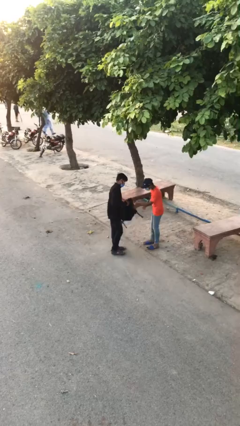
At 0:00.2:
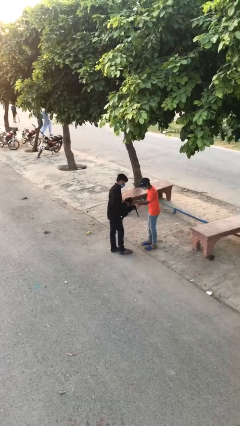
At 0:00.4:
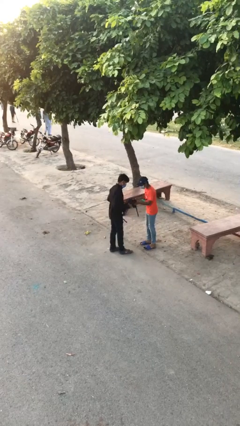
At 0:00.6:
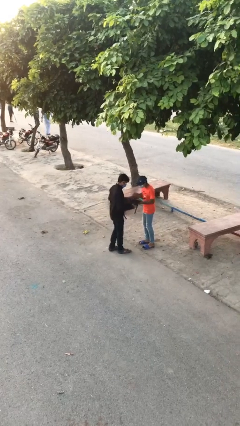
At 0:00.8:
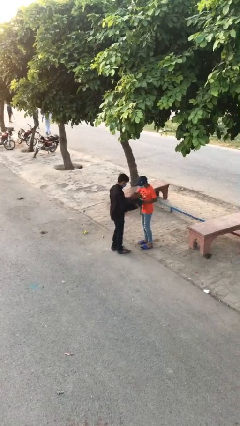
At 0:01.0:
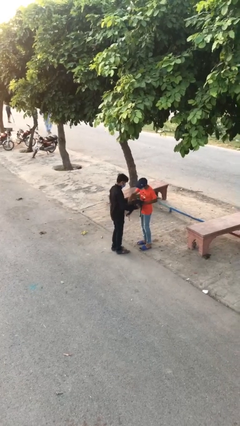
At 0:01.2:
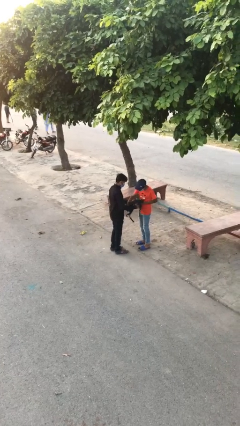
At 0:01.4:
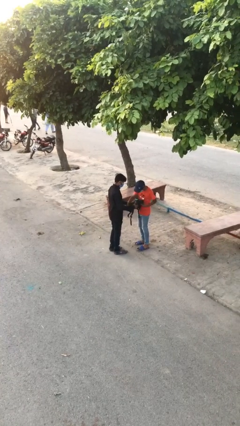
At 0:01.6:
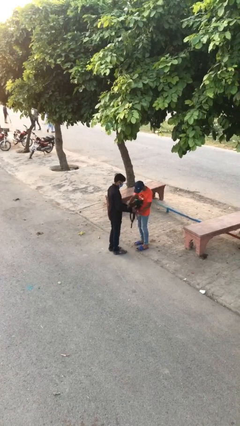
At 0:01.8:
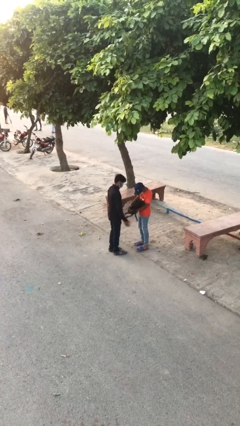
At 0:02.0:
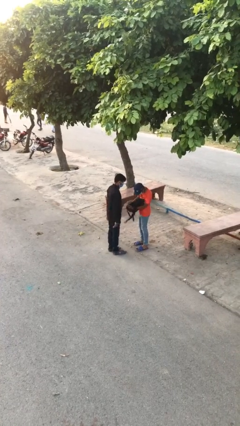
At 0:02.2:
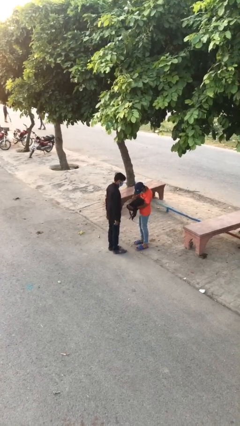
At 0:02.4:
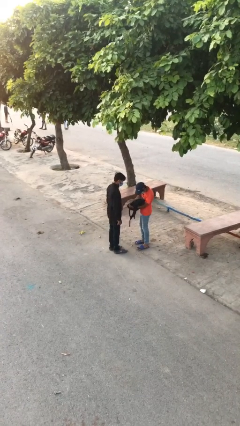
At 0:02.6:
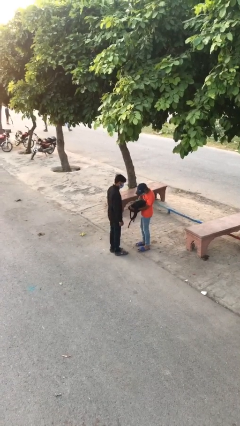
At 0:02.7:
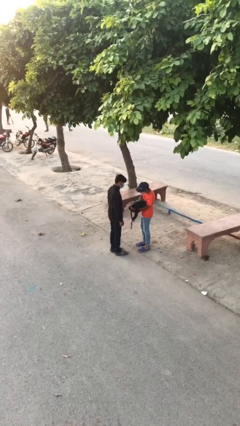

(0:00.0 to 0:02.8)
person transfers object to person

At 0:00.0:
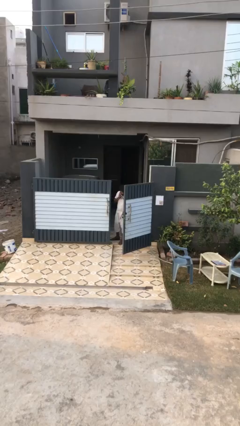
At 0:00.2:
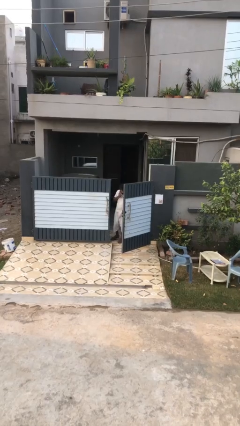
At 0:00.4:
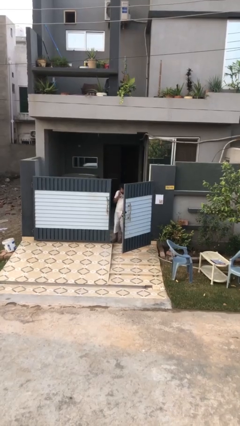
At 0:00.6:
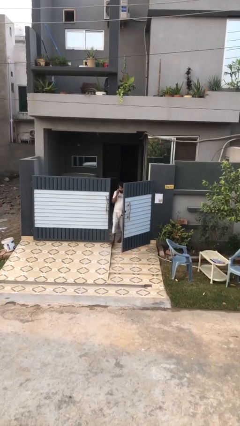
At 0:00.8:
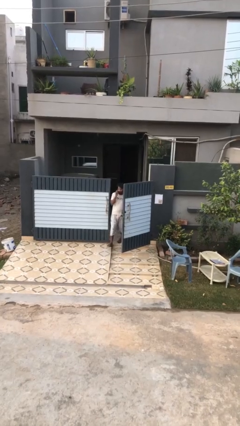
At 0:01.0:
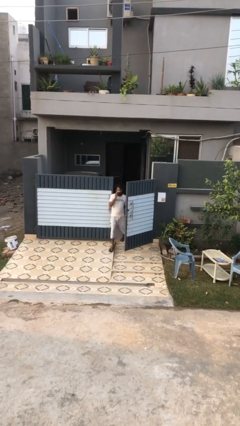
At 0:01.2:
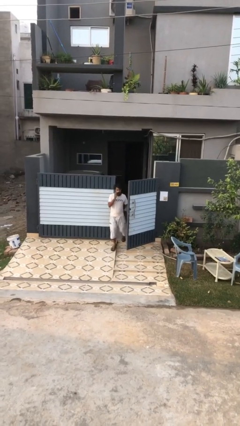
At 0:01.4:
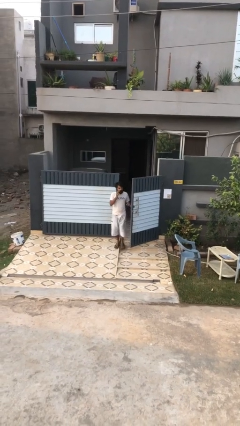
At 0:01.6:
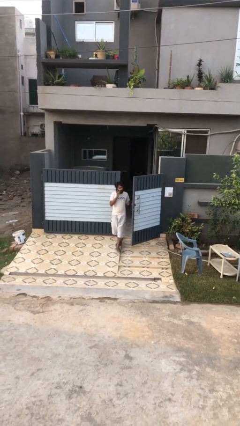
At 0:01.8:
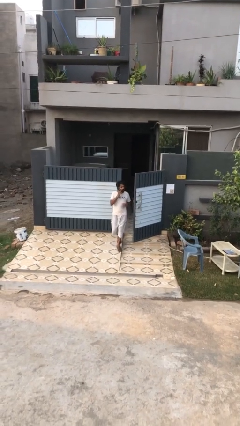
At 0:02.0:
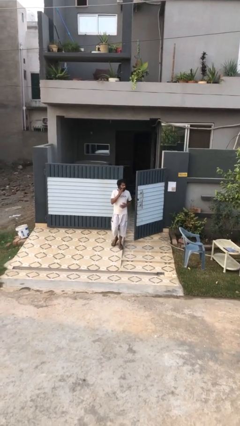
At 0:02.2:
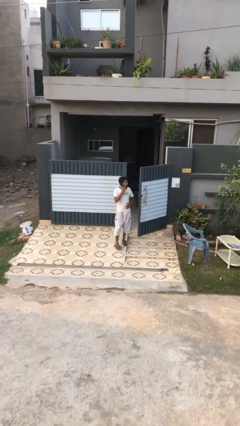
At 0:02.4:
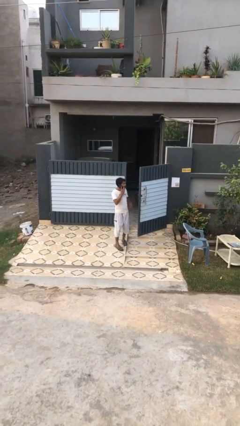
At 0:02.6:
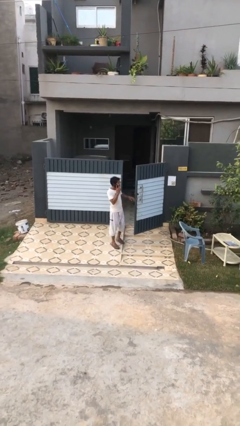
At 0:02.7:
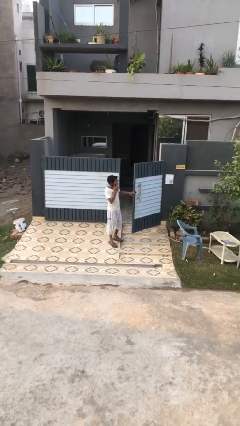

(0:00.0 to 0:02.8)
person enters scene through structure

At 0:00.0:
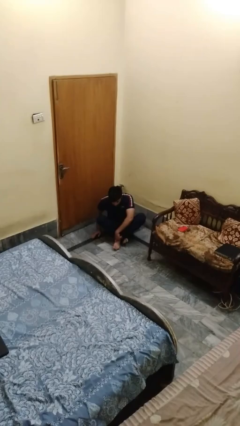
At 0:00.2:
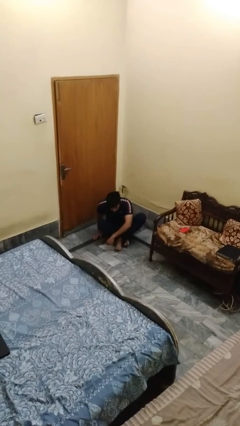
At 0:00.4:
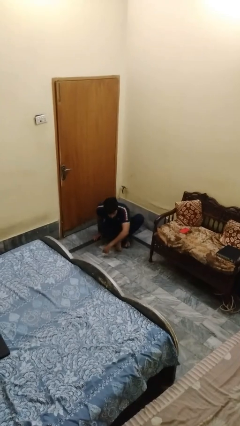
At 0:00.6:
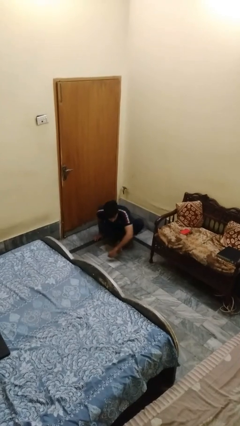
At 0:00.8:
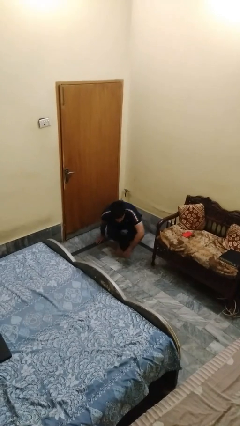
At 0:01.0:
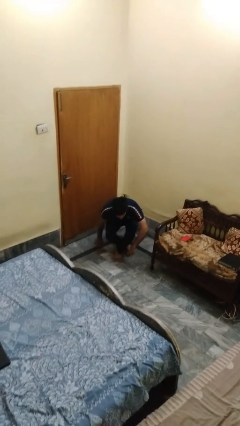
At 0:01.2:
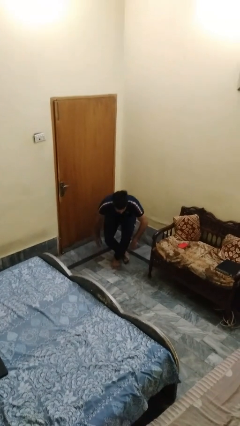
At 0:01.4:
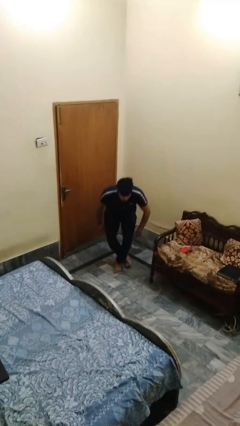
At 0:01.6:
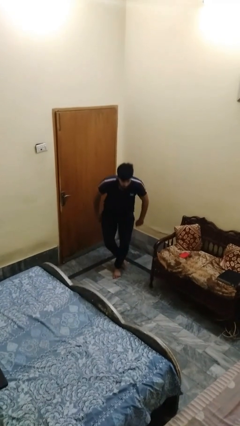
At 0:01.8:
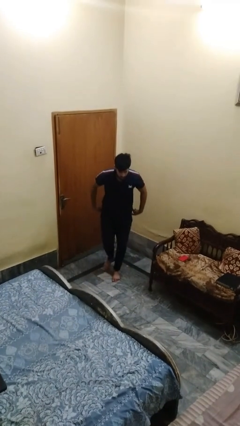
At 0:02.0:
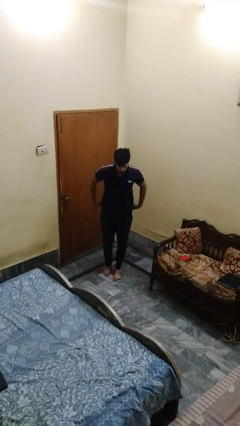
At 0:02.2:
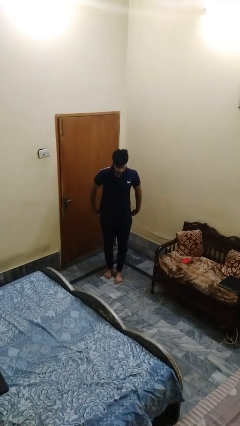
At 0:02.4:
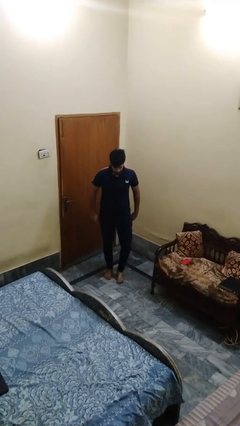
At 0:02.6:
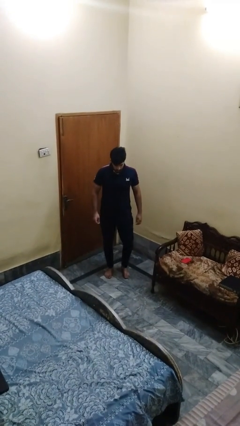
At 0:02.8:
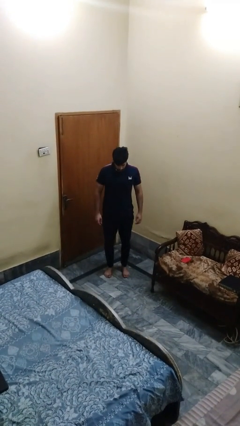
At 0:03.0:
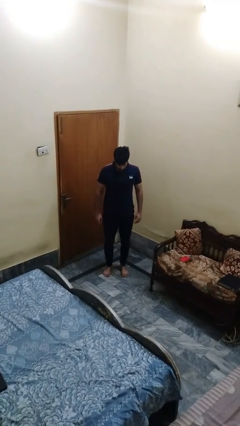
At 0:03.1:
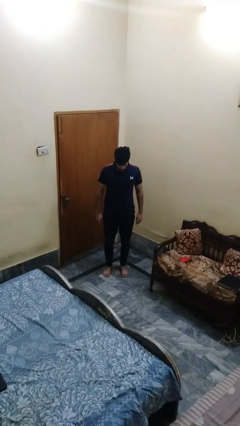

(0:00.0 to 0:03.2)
person stands up from floor

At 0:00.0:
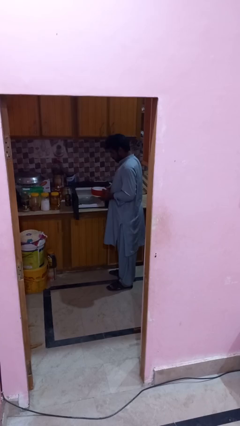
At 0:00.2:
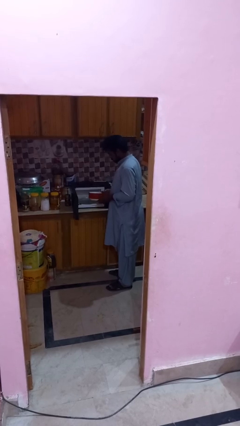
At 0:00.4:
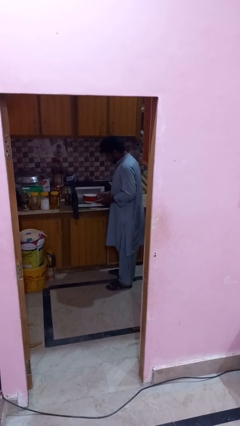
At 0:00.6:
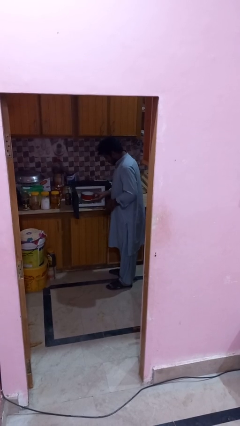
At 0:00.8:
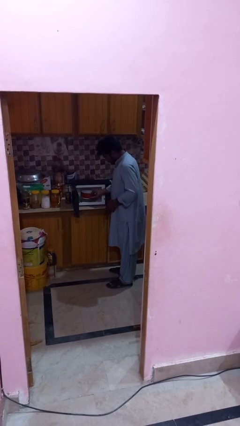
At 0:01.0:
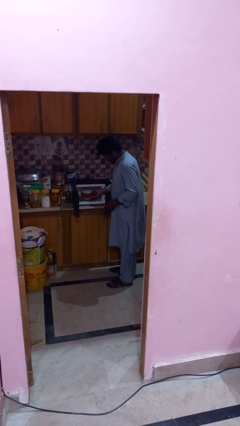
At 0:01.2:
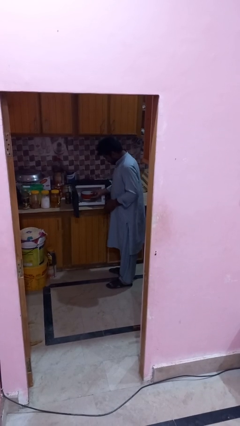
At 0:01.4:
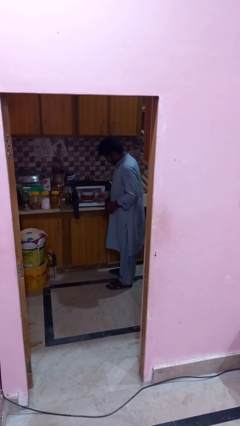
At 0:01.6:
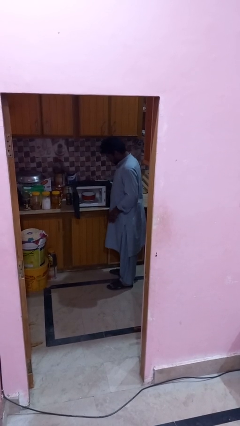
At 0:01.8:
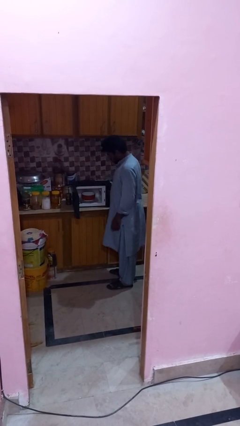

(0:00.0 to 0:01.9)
person puts object into microwave

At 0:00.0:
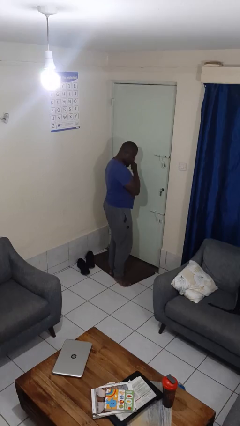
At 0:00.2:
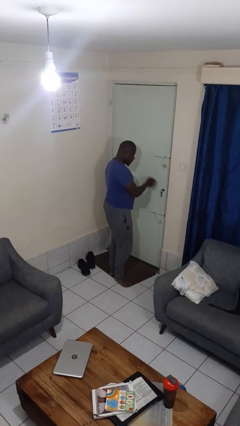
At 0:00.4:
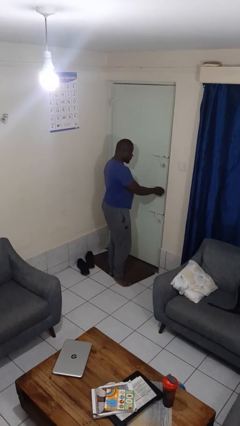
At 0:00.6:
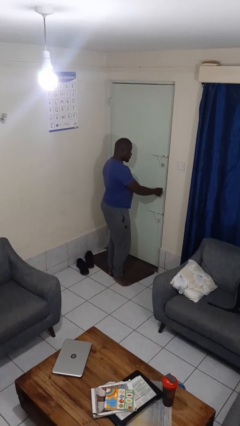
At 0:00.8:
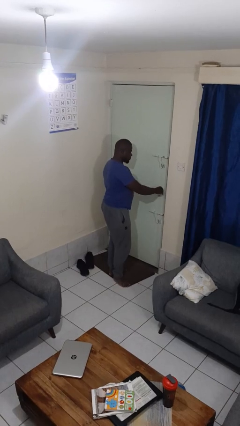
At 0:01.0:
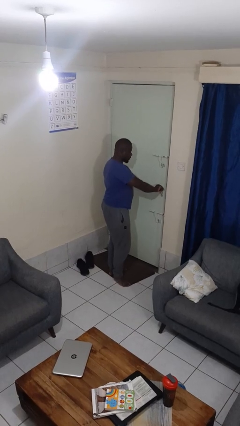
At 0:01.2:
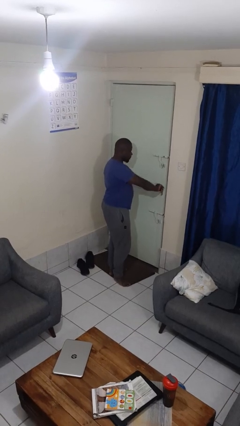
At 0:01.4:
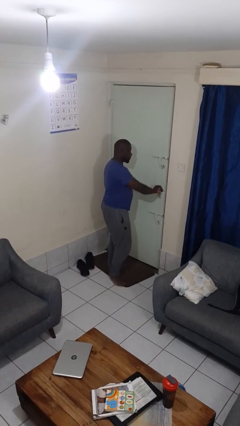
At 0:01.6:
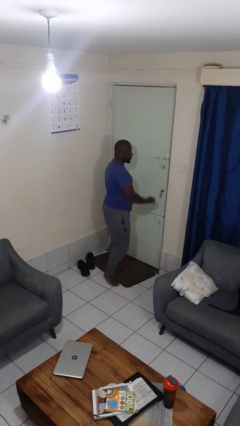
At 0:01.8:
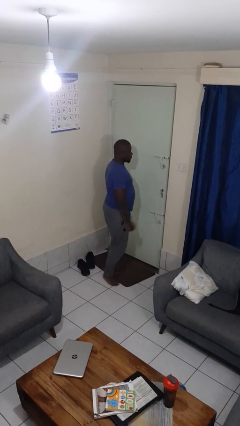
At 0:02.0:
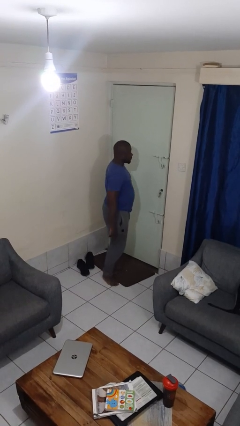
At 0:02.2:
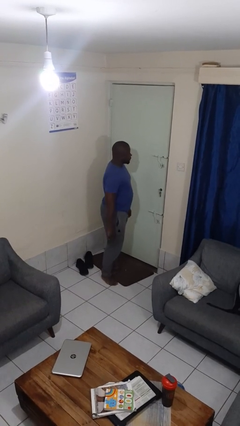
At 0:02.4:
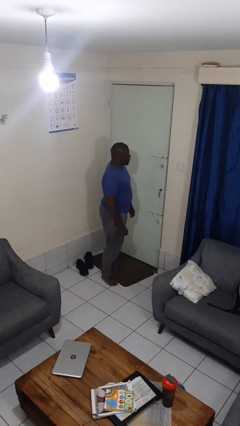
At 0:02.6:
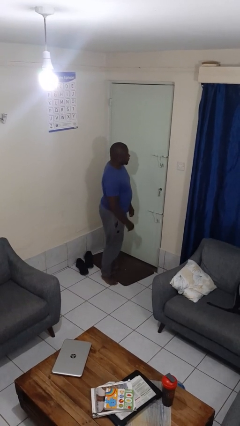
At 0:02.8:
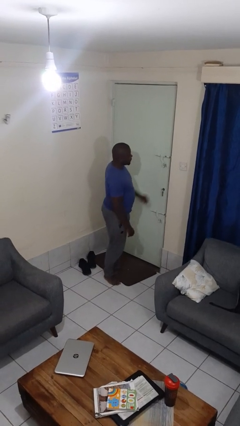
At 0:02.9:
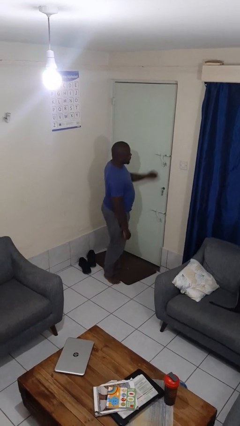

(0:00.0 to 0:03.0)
person unlocks door with keys

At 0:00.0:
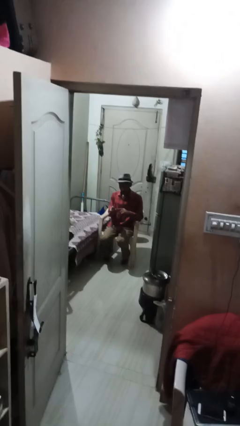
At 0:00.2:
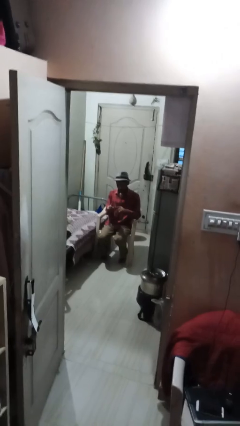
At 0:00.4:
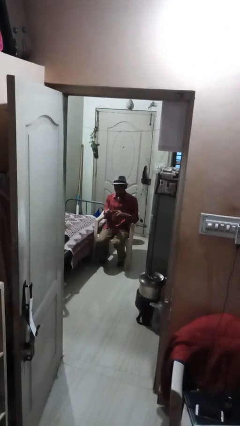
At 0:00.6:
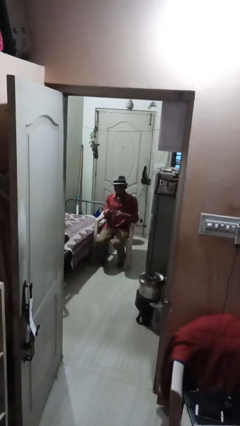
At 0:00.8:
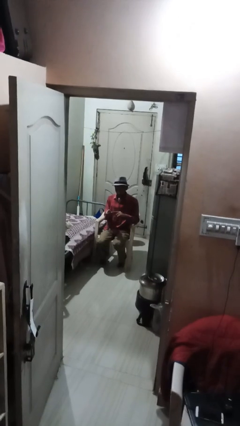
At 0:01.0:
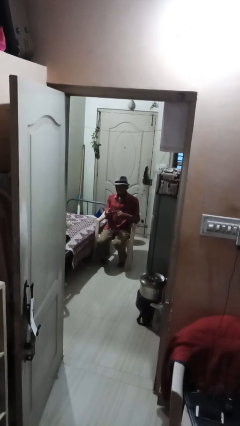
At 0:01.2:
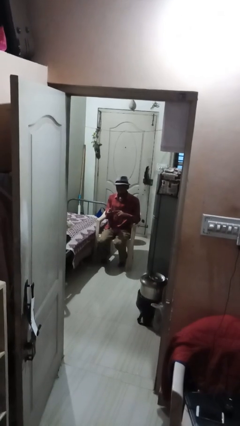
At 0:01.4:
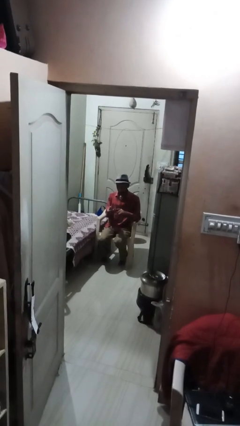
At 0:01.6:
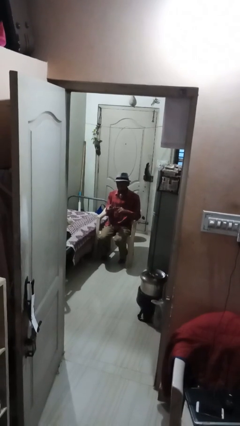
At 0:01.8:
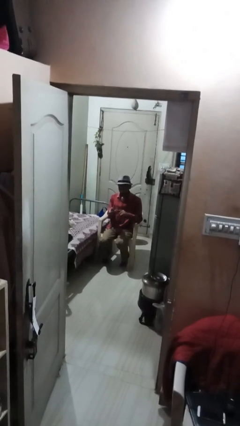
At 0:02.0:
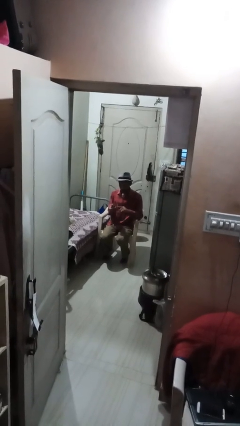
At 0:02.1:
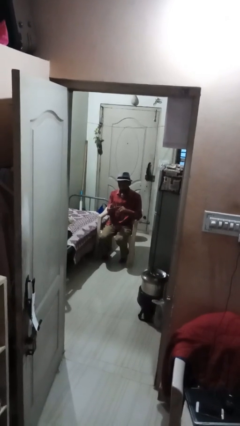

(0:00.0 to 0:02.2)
person clips fingernails

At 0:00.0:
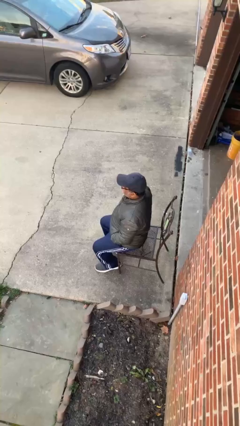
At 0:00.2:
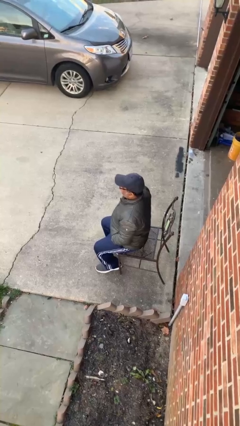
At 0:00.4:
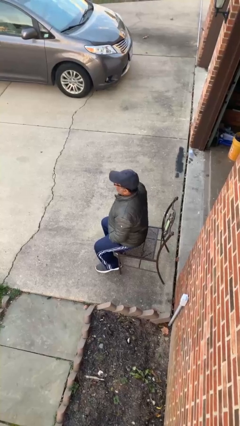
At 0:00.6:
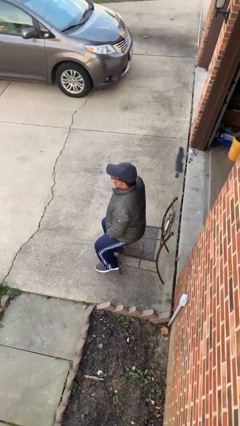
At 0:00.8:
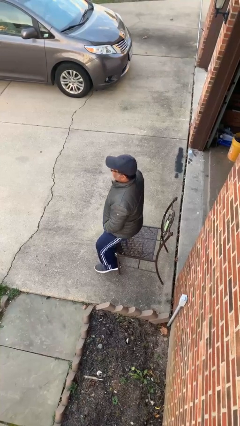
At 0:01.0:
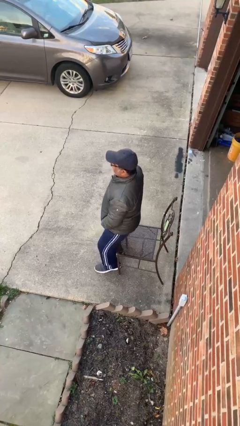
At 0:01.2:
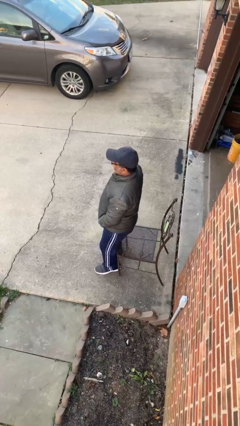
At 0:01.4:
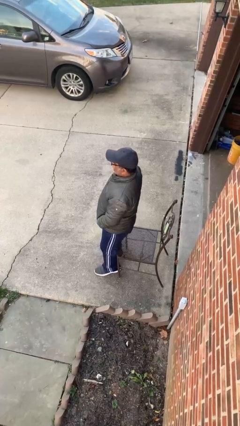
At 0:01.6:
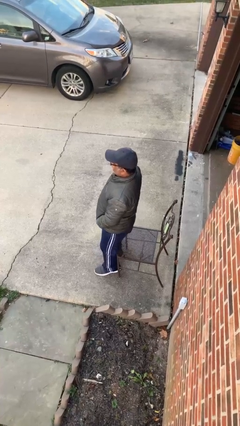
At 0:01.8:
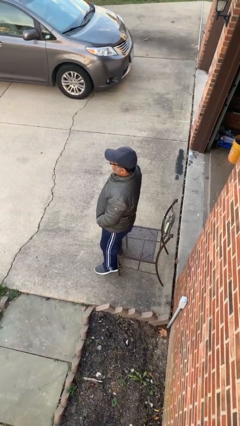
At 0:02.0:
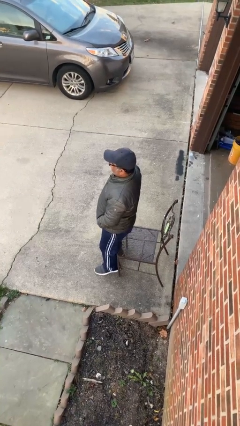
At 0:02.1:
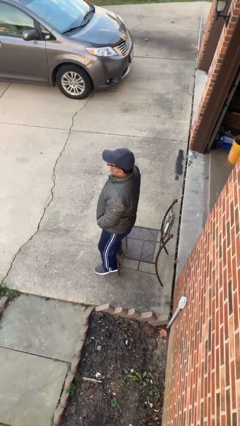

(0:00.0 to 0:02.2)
person stands up
